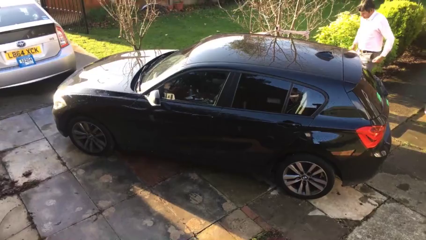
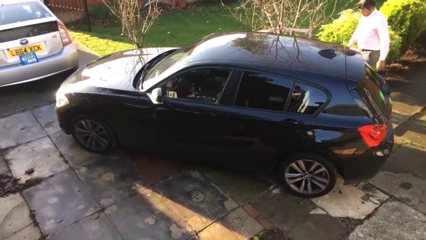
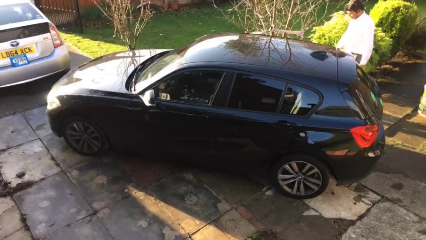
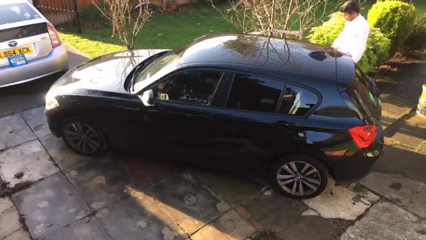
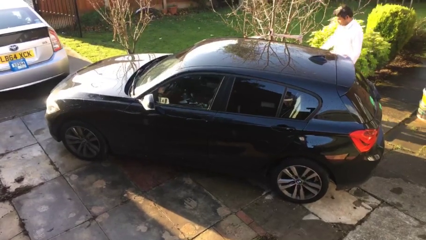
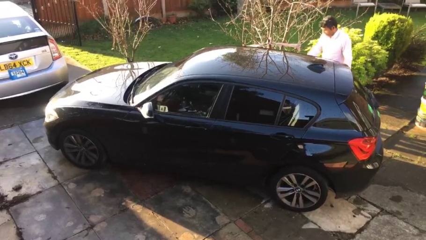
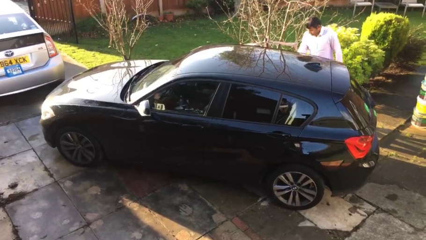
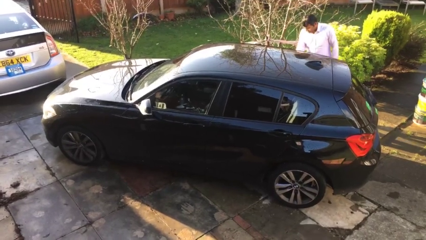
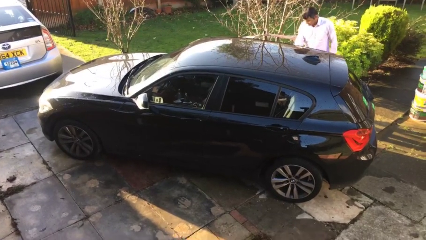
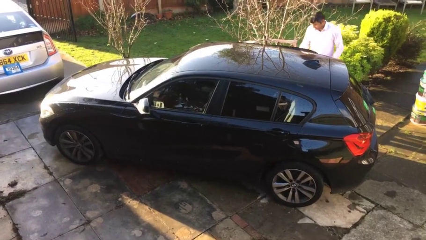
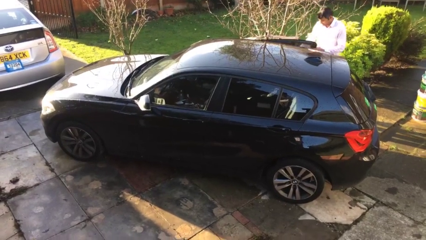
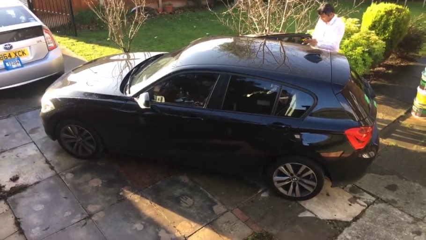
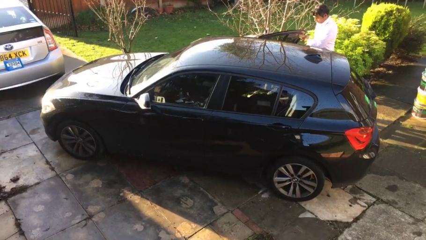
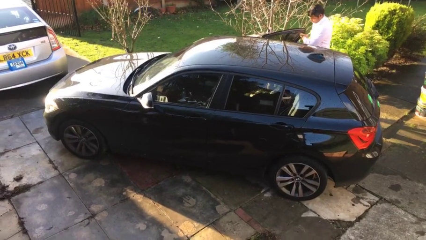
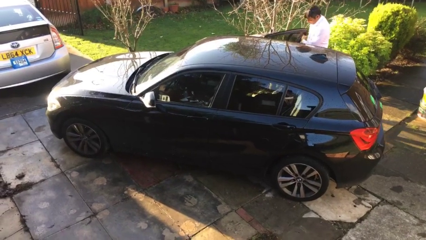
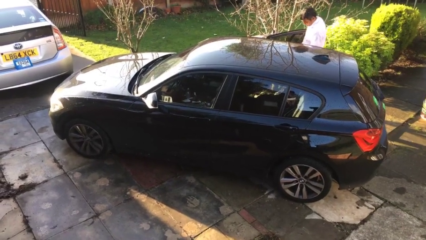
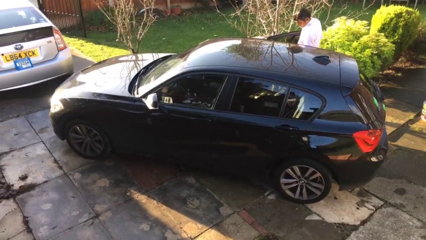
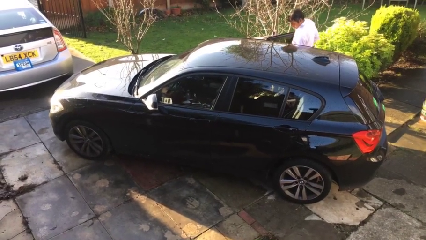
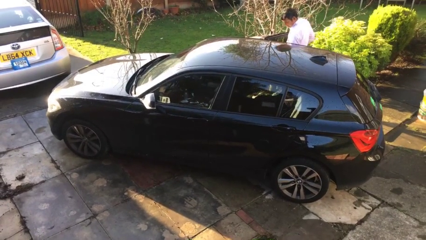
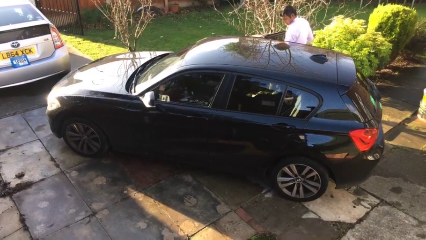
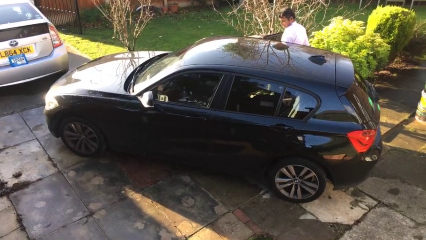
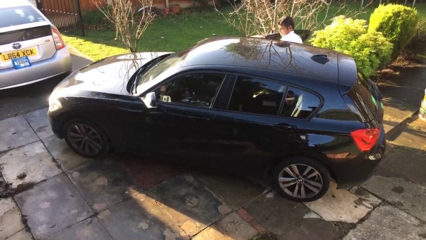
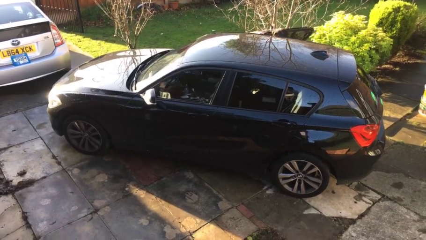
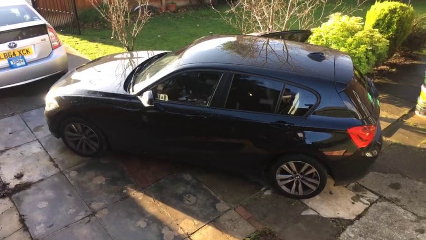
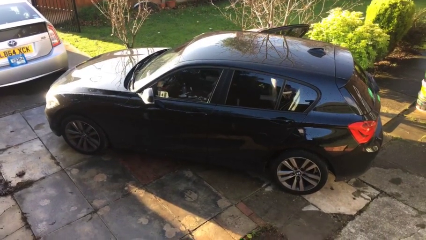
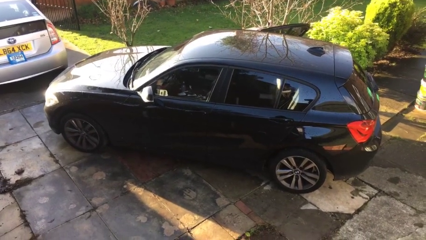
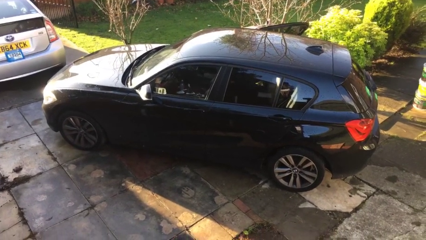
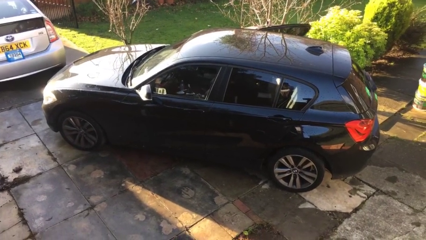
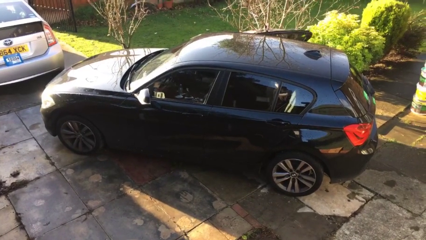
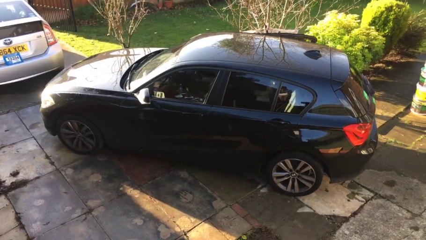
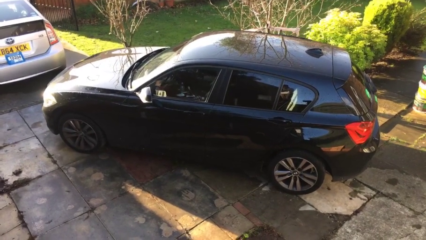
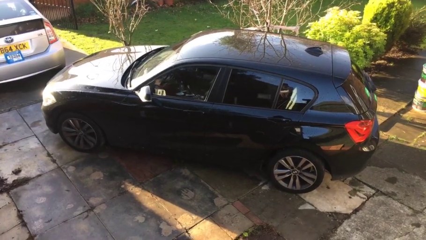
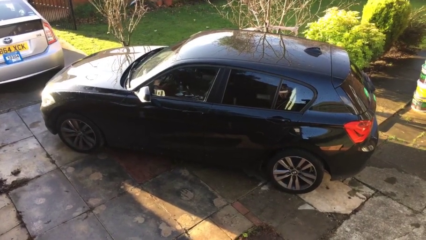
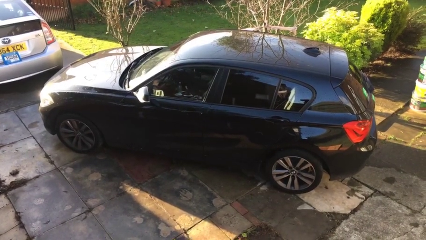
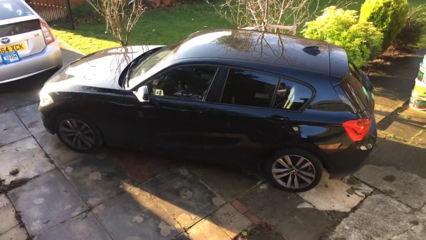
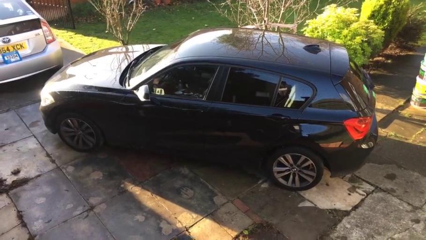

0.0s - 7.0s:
car picks up person

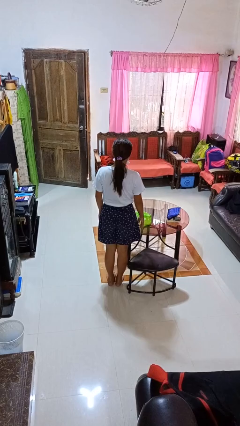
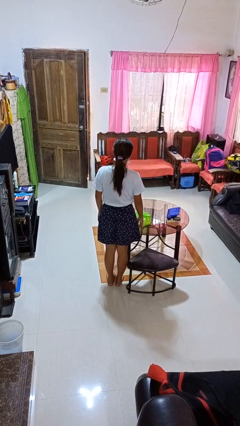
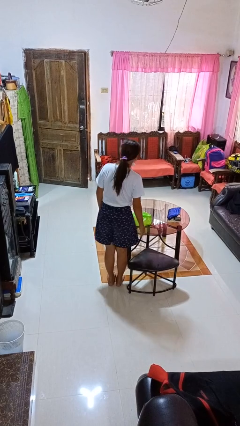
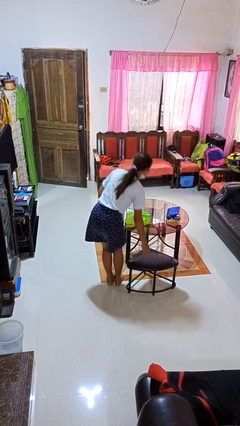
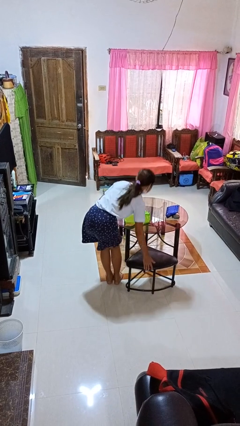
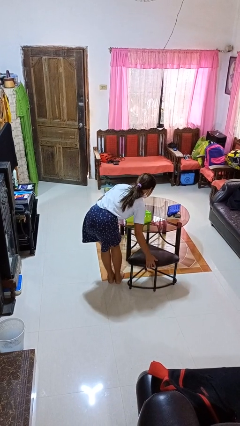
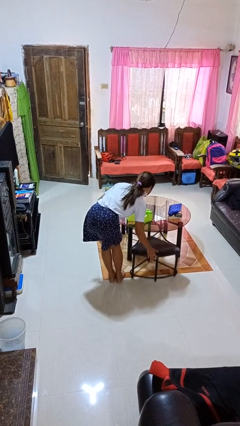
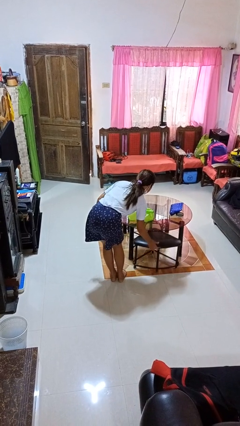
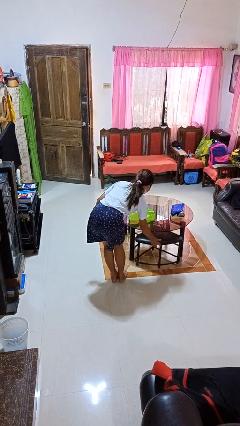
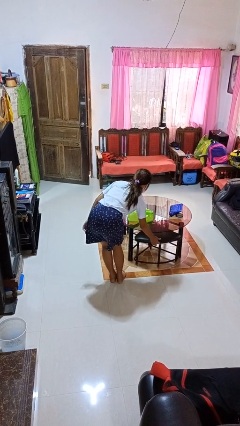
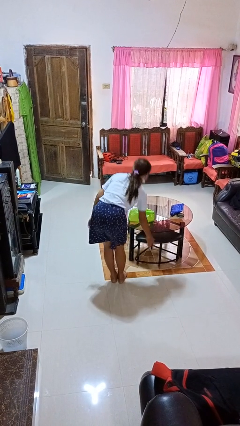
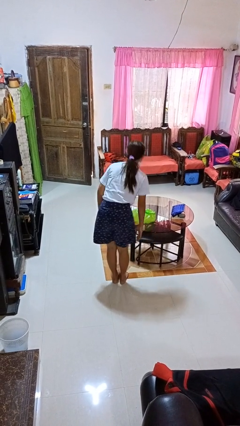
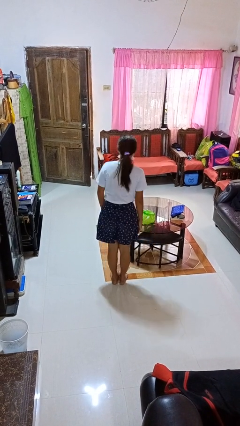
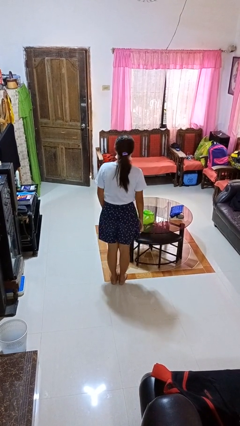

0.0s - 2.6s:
person pushes in chair

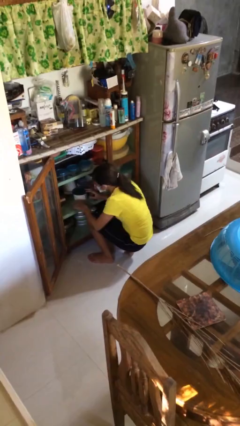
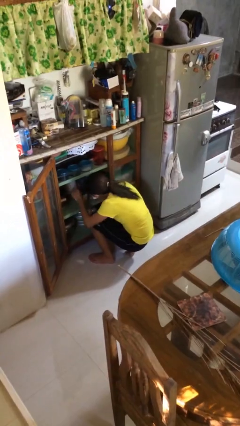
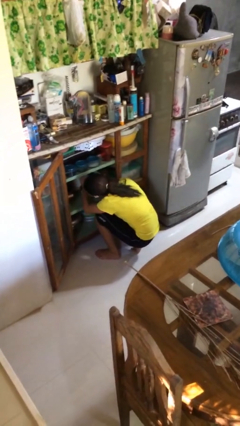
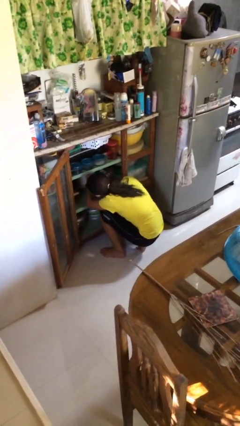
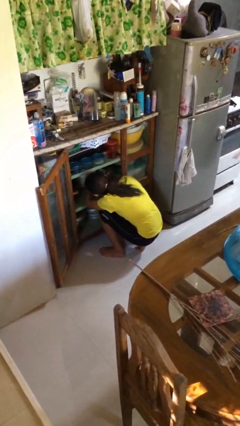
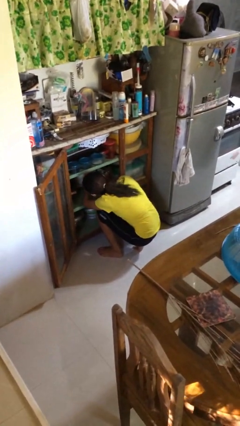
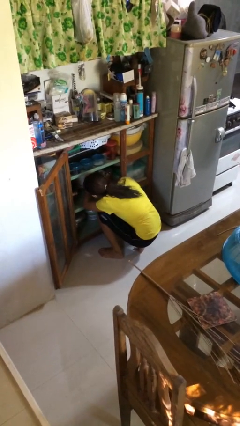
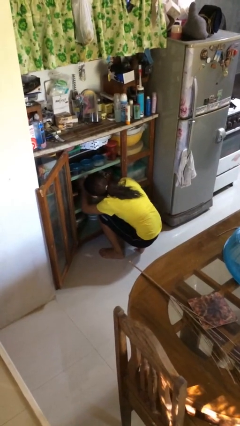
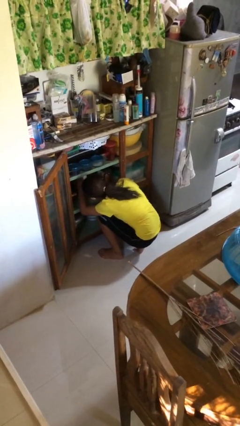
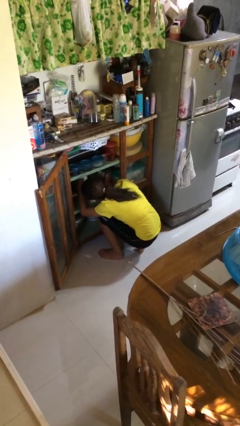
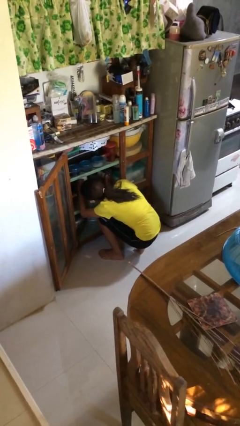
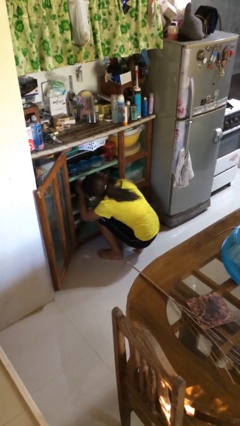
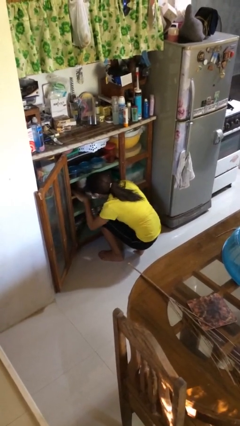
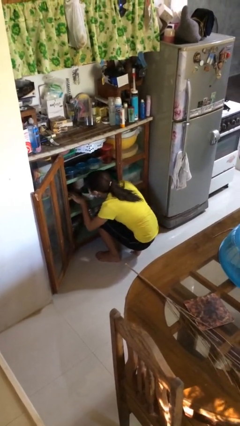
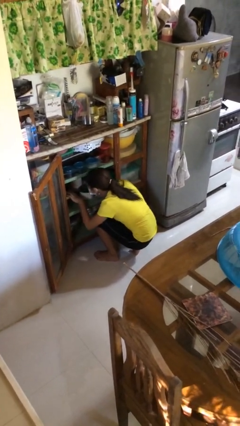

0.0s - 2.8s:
person searches in cabinet

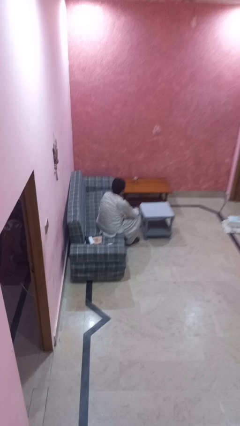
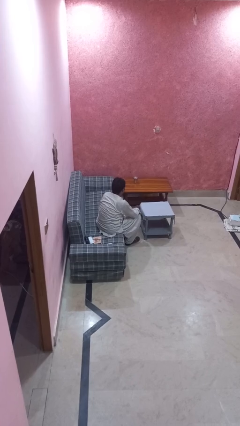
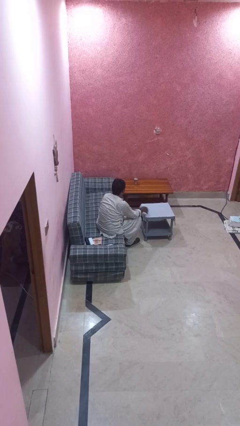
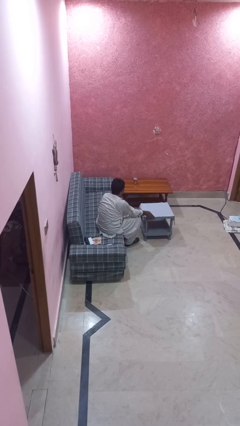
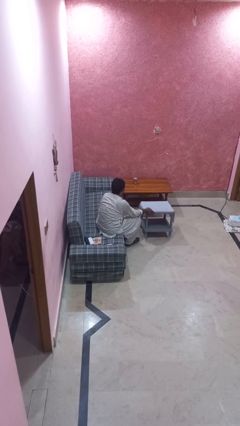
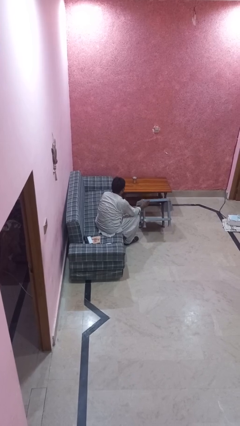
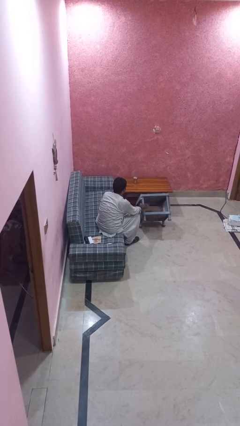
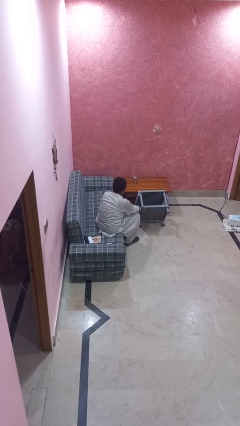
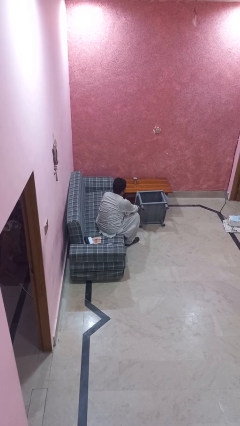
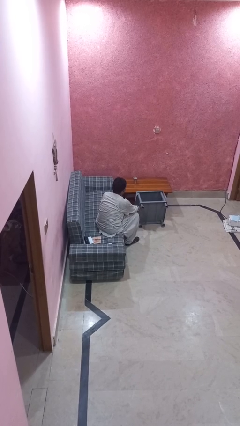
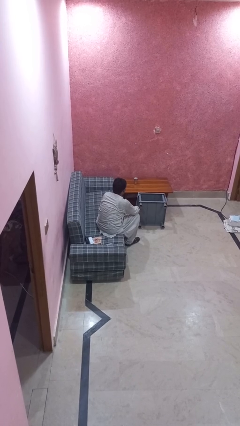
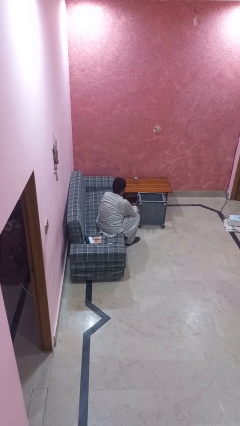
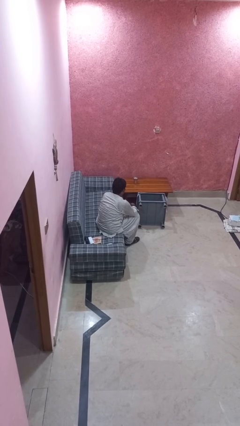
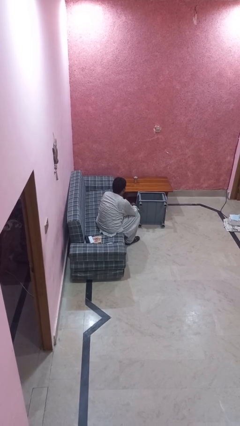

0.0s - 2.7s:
person knocks over furniture

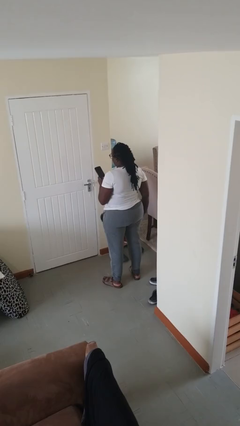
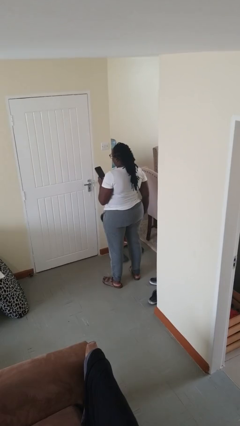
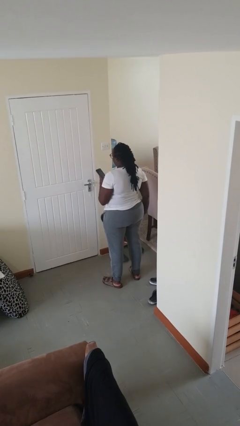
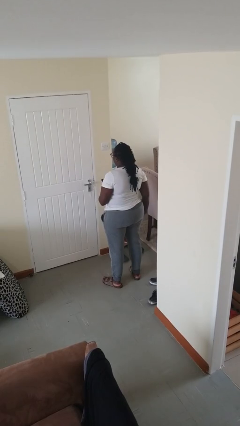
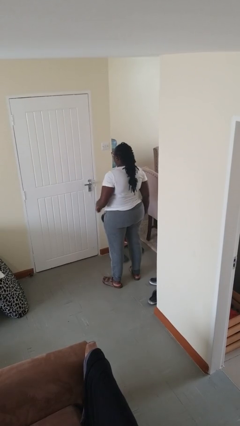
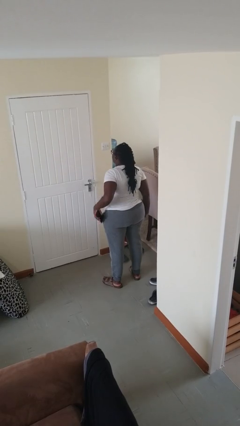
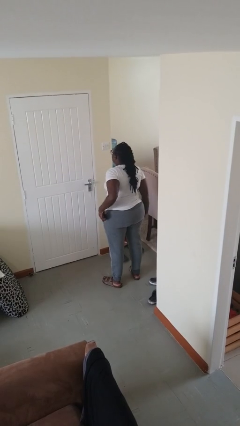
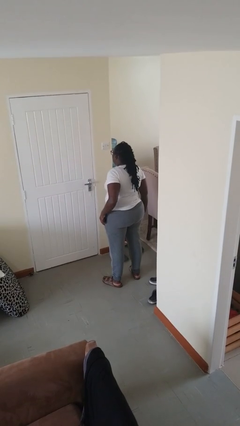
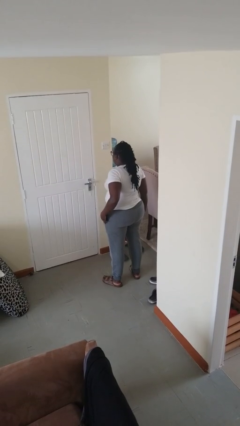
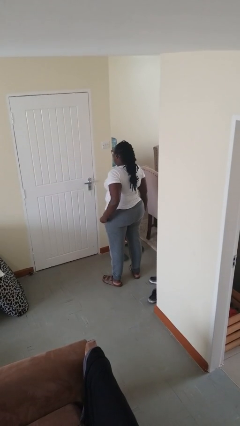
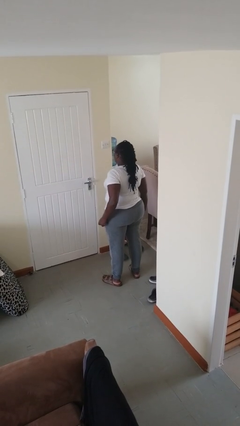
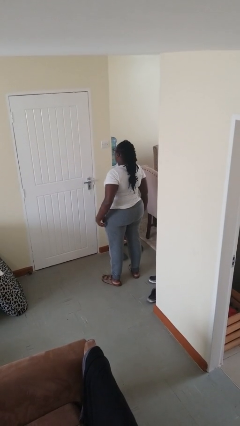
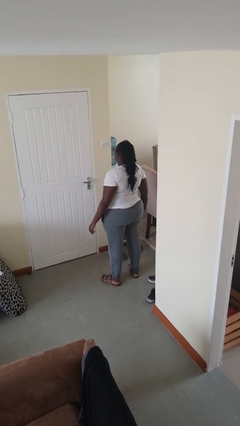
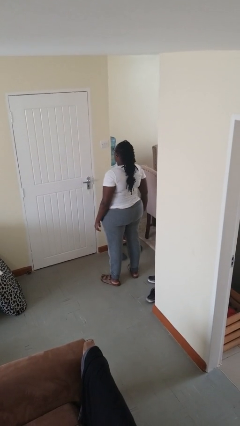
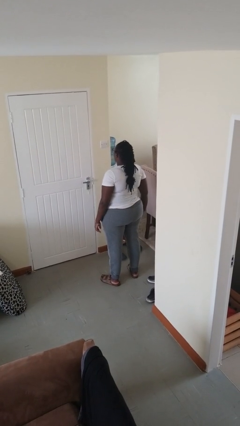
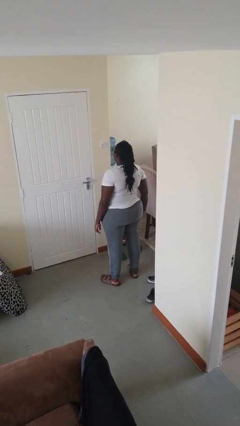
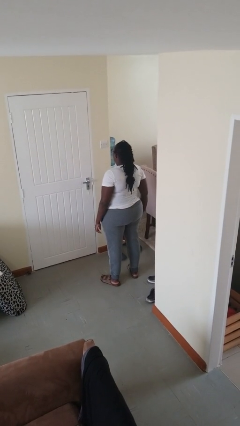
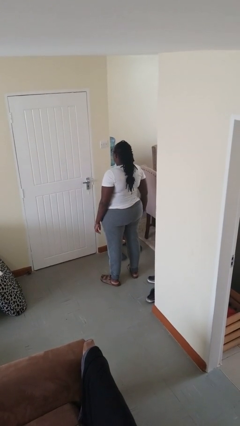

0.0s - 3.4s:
person puts phone into pocket
